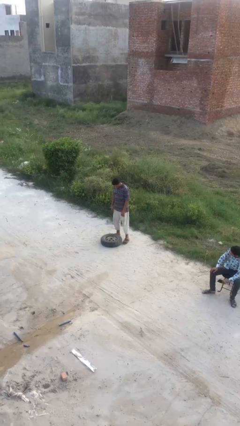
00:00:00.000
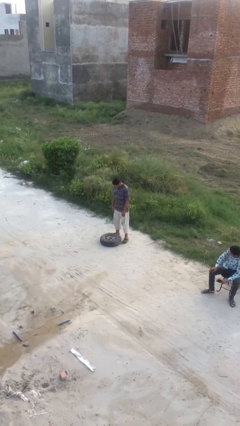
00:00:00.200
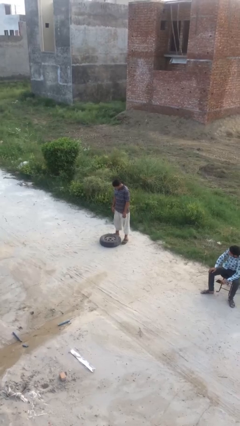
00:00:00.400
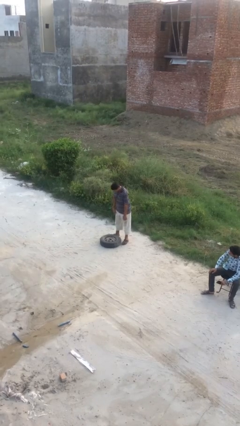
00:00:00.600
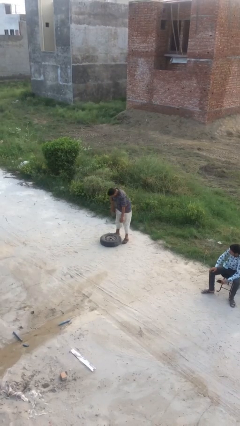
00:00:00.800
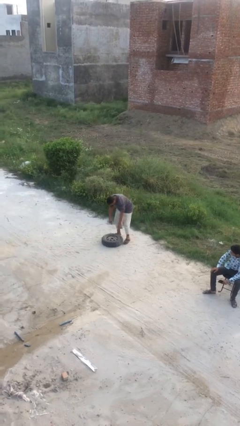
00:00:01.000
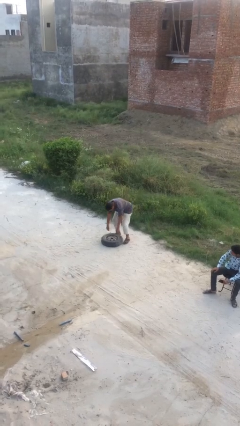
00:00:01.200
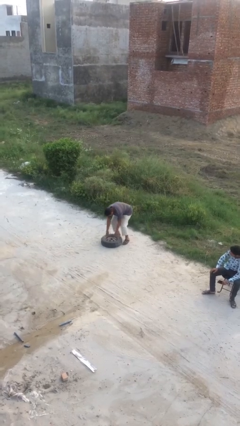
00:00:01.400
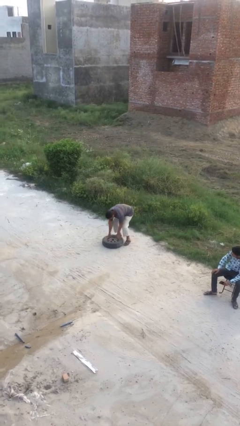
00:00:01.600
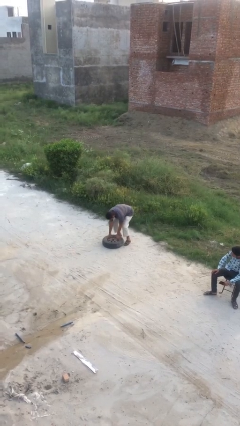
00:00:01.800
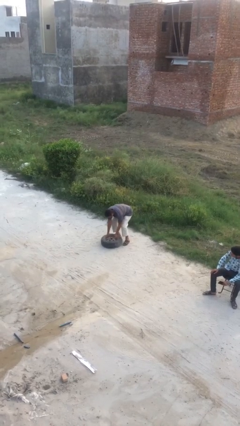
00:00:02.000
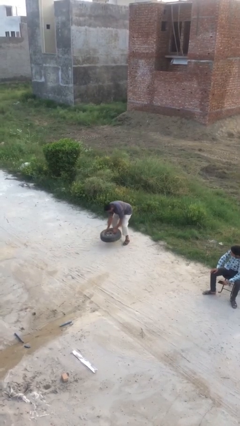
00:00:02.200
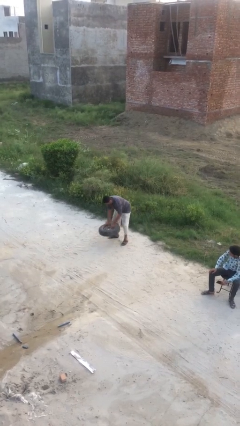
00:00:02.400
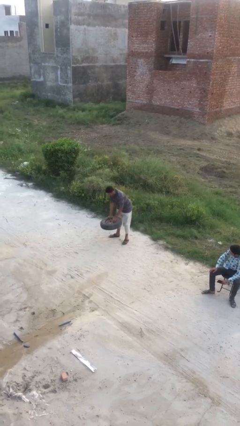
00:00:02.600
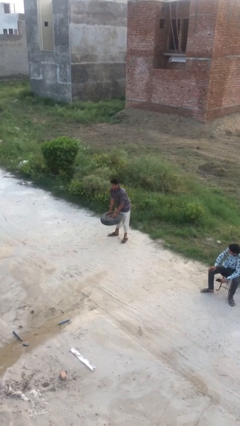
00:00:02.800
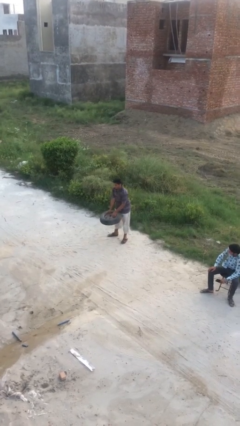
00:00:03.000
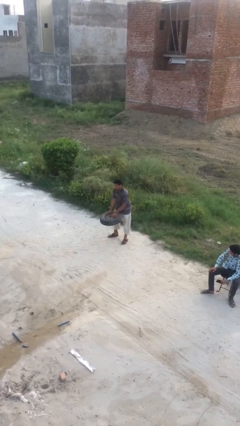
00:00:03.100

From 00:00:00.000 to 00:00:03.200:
person picks up object from floor

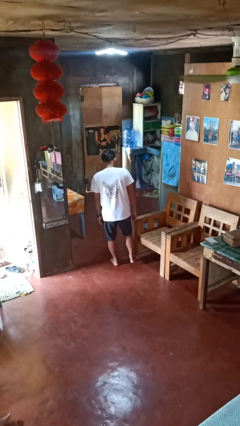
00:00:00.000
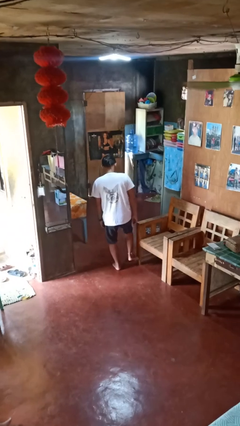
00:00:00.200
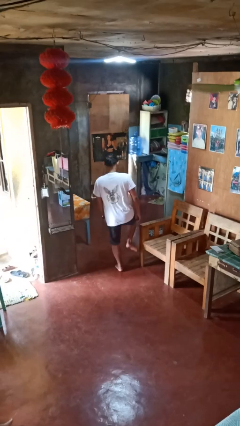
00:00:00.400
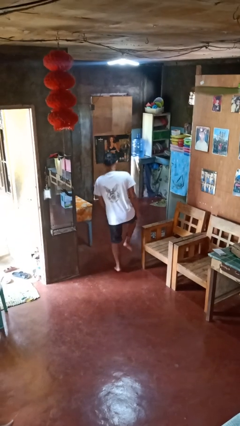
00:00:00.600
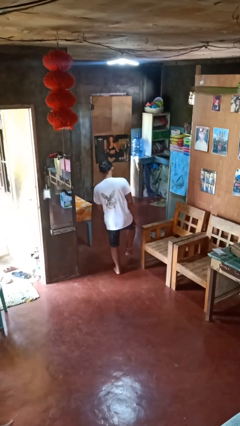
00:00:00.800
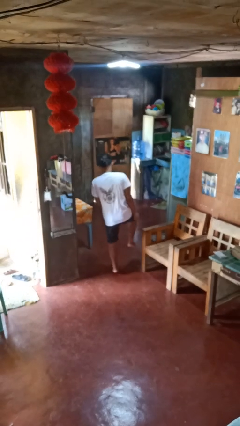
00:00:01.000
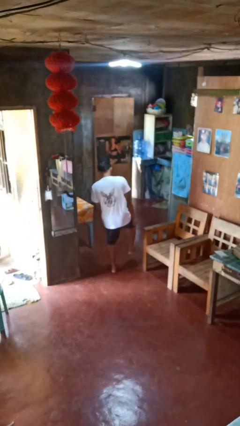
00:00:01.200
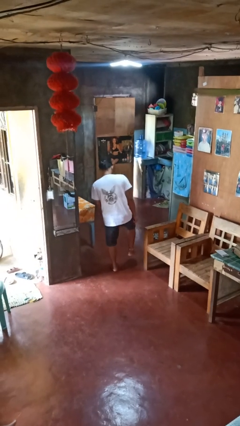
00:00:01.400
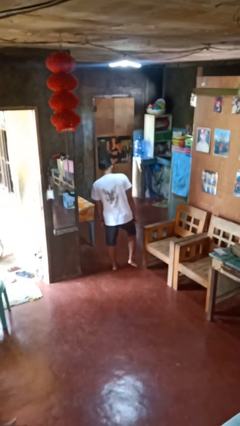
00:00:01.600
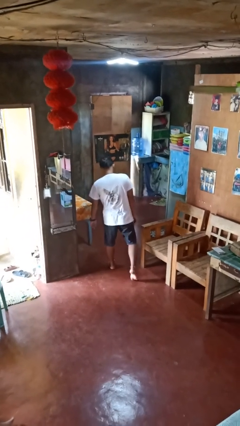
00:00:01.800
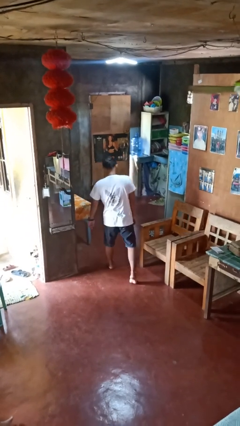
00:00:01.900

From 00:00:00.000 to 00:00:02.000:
person stubs toe

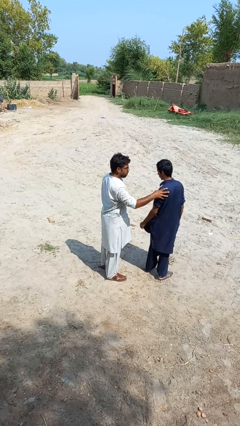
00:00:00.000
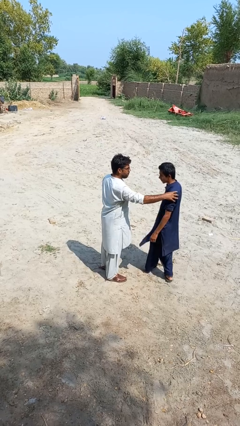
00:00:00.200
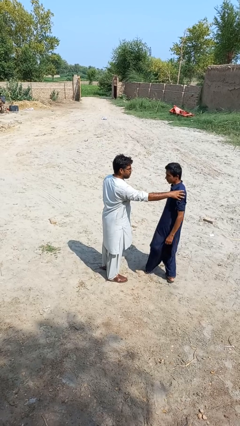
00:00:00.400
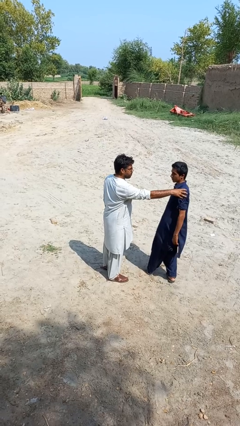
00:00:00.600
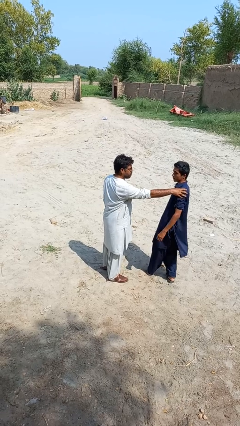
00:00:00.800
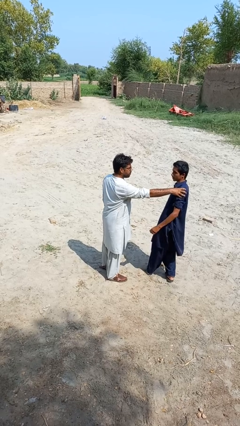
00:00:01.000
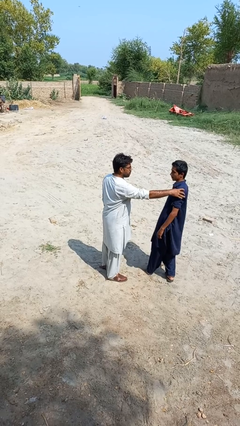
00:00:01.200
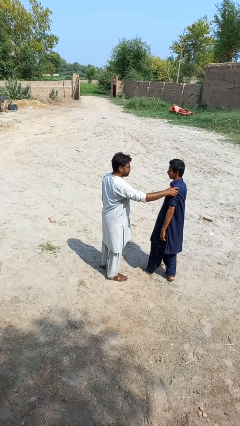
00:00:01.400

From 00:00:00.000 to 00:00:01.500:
person spins person around

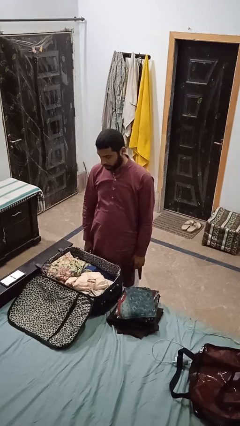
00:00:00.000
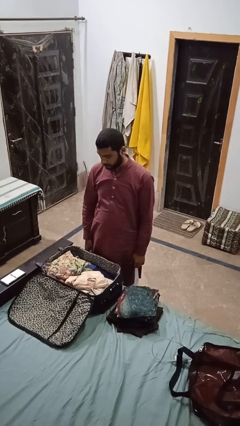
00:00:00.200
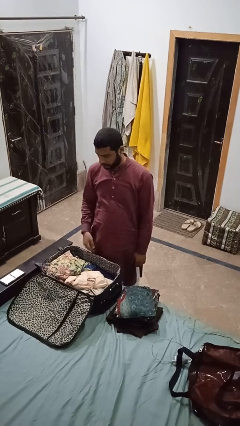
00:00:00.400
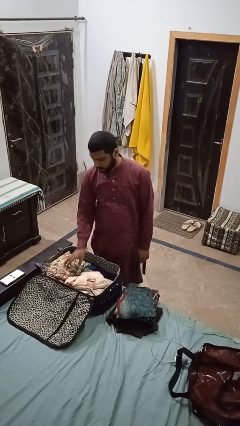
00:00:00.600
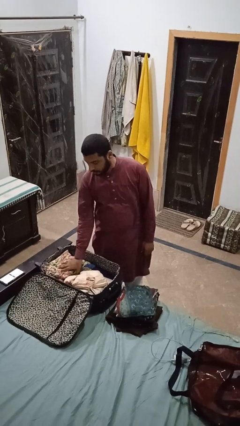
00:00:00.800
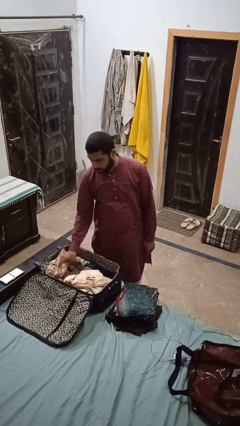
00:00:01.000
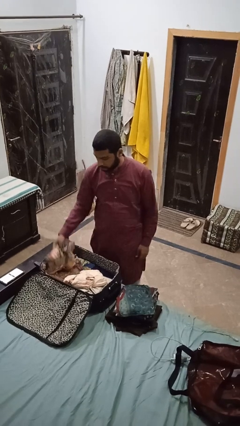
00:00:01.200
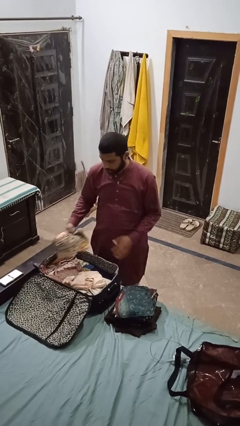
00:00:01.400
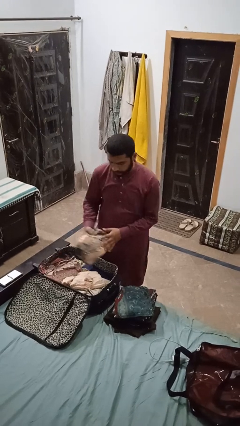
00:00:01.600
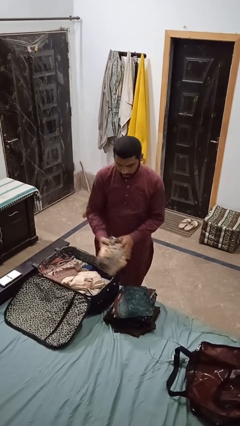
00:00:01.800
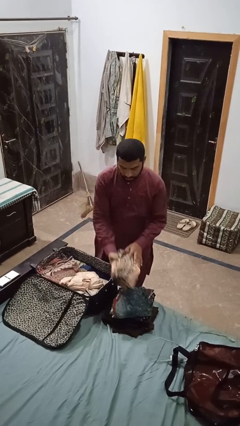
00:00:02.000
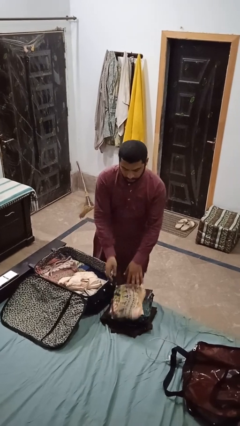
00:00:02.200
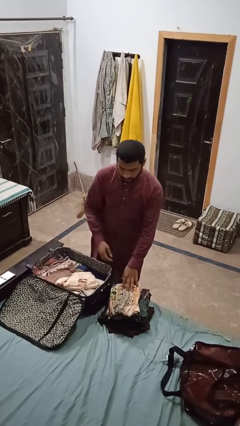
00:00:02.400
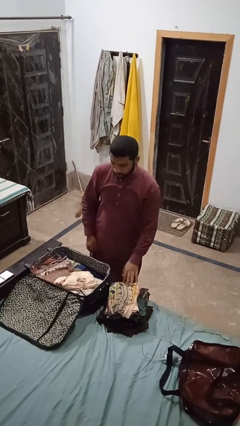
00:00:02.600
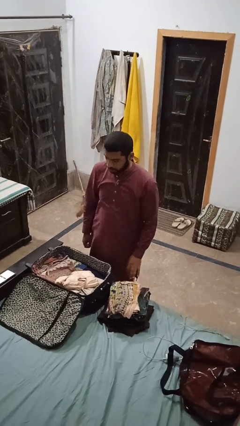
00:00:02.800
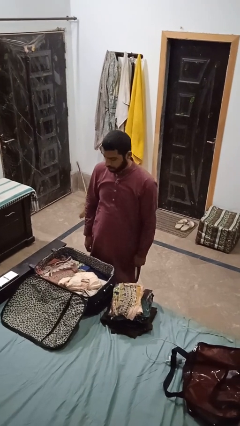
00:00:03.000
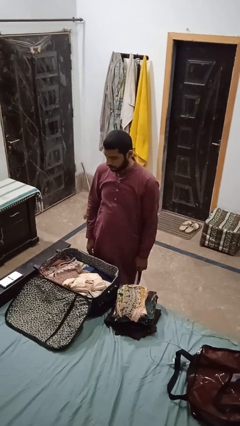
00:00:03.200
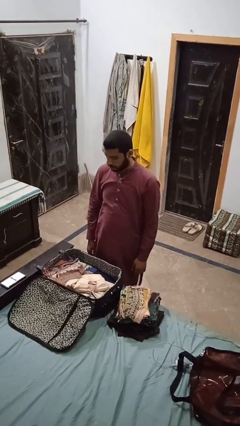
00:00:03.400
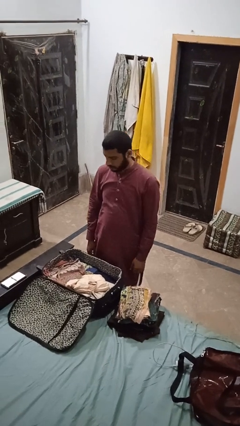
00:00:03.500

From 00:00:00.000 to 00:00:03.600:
person unloads clothes from suitcase

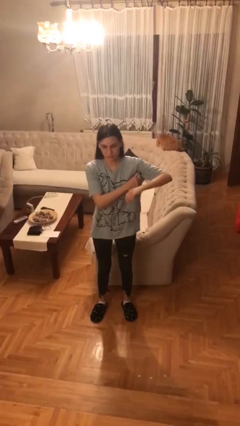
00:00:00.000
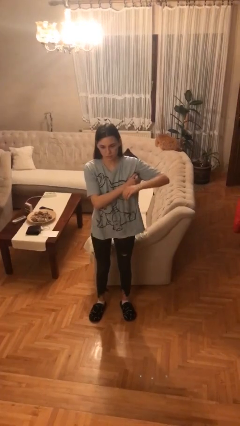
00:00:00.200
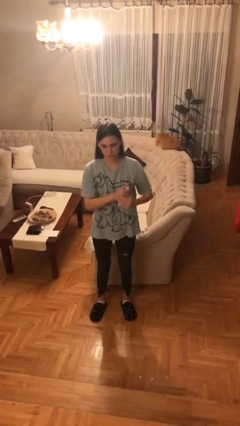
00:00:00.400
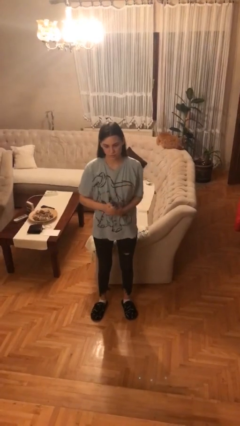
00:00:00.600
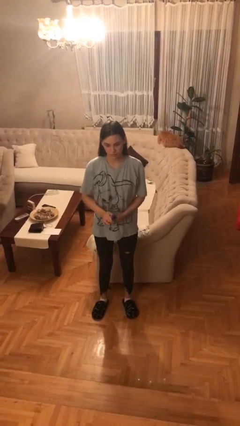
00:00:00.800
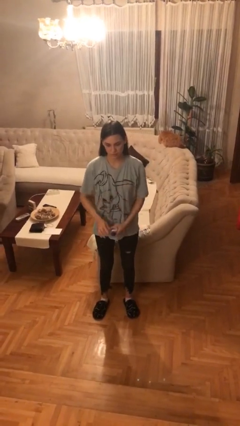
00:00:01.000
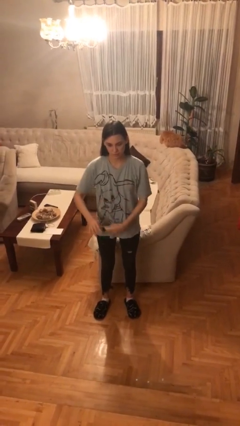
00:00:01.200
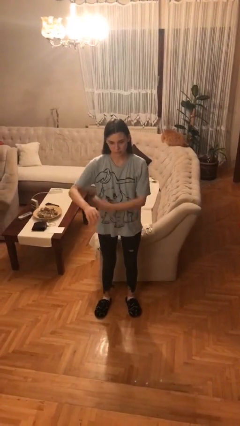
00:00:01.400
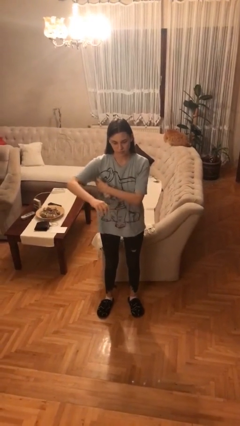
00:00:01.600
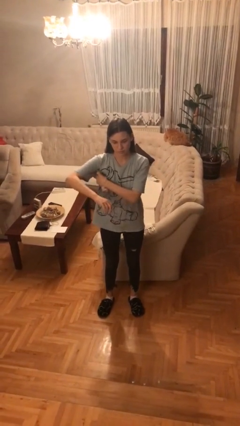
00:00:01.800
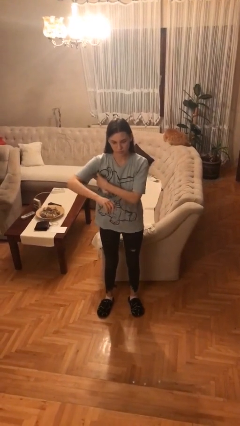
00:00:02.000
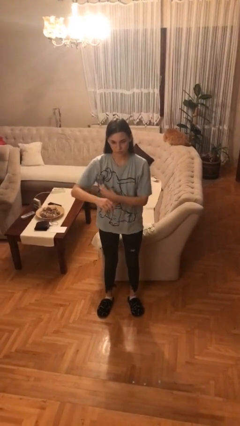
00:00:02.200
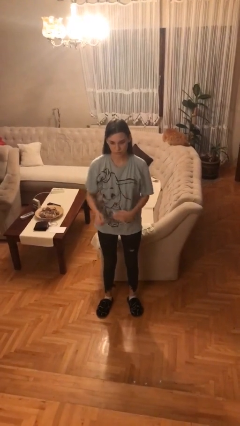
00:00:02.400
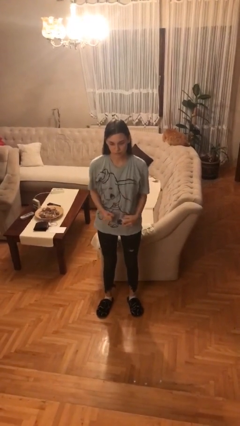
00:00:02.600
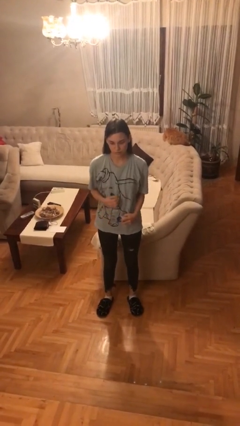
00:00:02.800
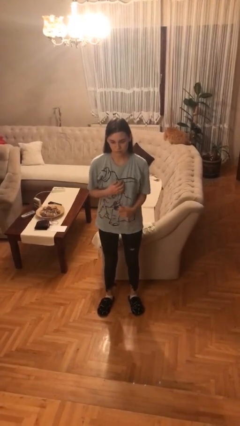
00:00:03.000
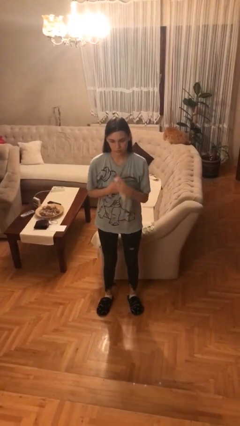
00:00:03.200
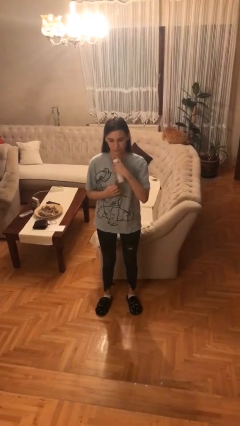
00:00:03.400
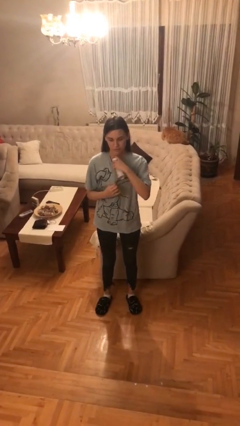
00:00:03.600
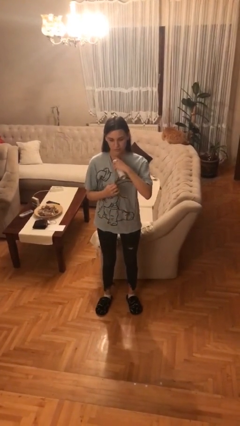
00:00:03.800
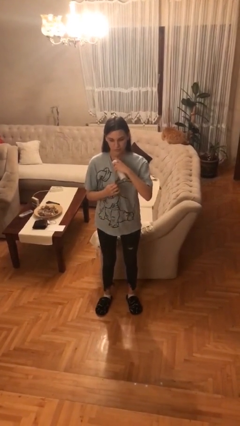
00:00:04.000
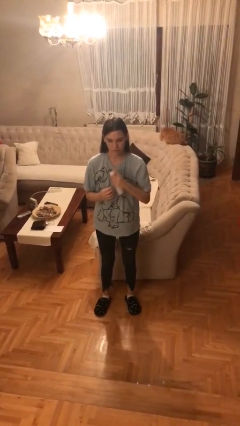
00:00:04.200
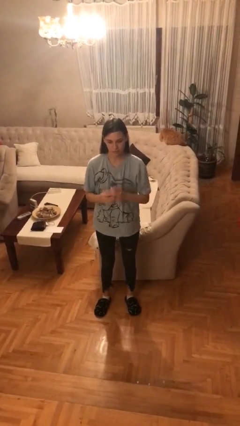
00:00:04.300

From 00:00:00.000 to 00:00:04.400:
person applies deodorant

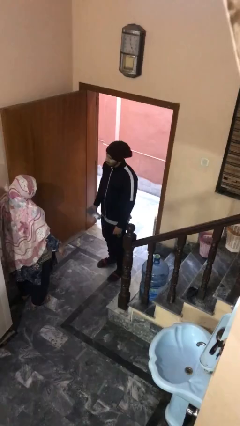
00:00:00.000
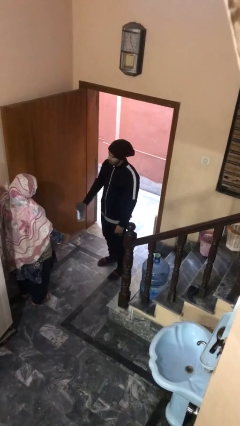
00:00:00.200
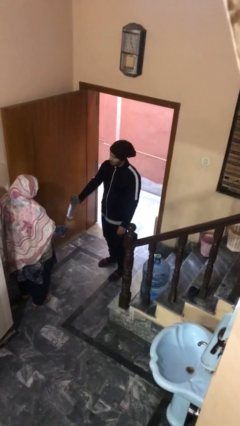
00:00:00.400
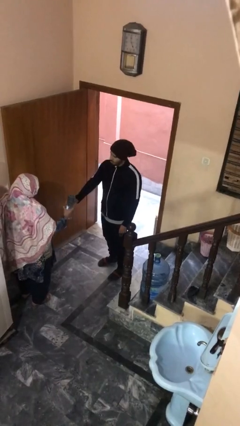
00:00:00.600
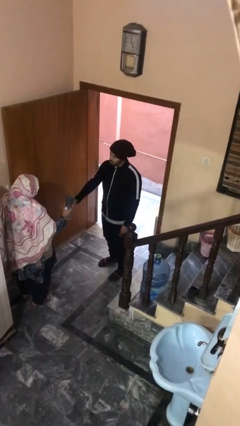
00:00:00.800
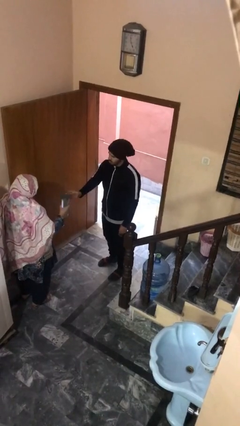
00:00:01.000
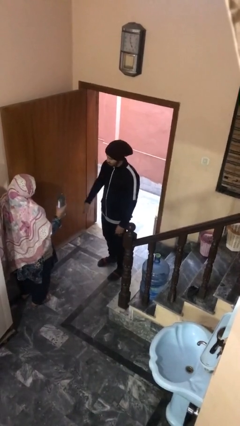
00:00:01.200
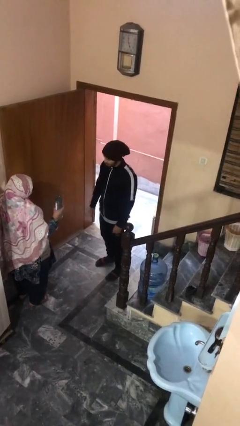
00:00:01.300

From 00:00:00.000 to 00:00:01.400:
person transfers object to person

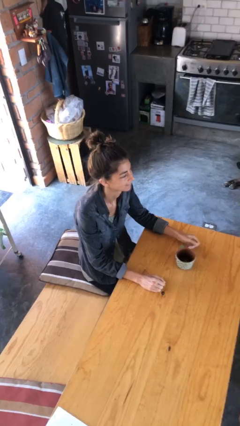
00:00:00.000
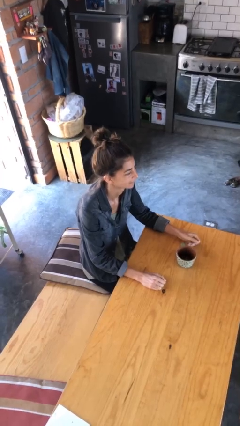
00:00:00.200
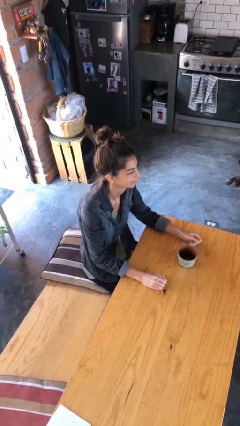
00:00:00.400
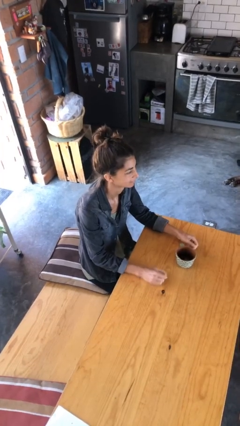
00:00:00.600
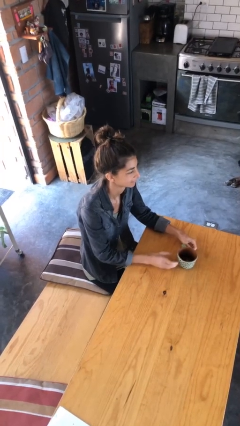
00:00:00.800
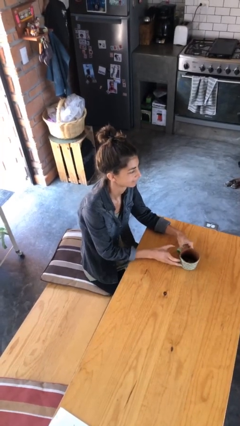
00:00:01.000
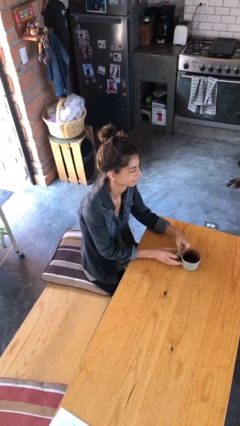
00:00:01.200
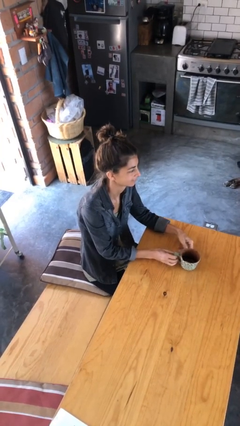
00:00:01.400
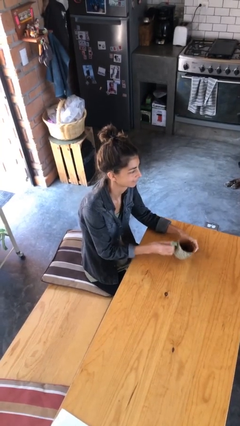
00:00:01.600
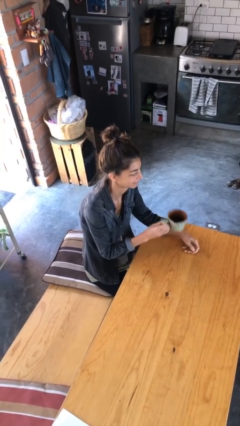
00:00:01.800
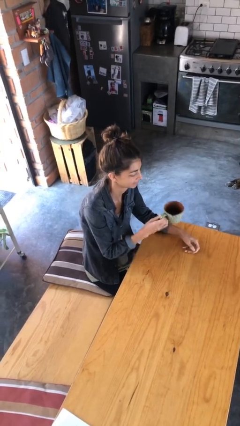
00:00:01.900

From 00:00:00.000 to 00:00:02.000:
person picks up object from table
